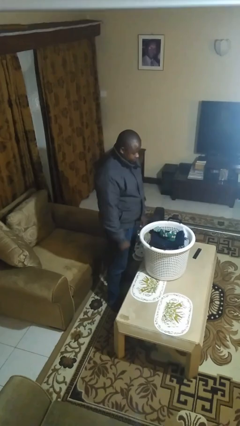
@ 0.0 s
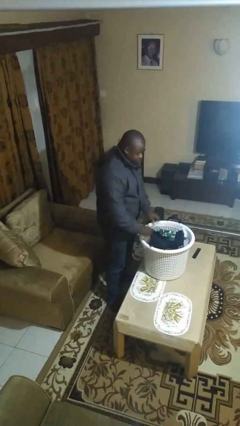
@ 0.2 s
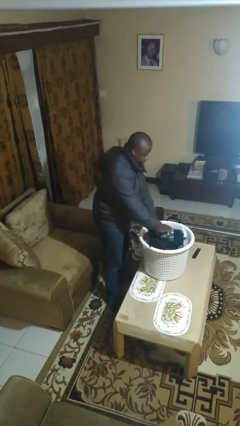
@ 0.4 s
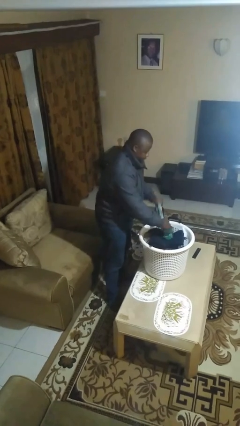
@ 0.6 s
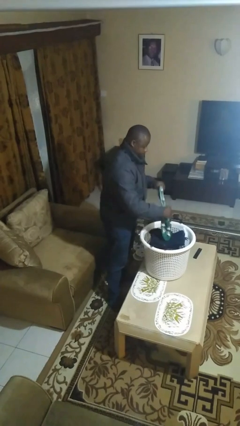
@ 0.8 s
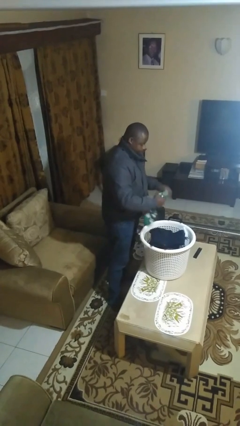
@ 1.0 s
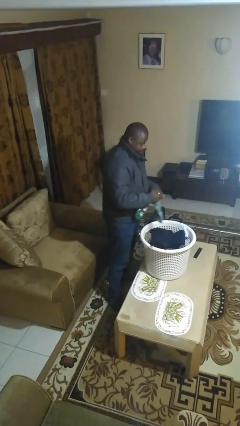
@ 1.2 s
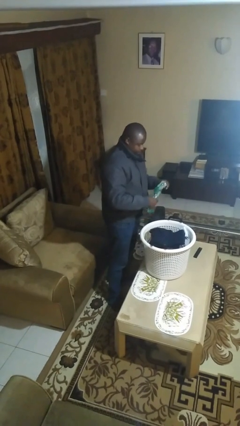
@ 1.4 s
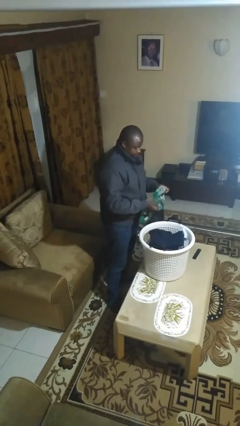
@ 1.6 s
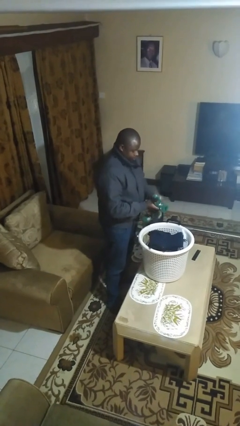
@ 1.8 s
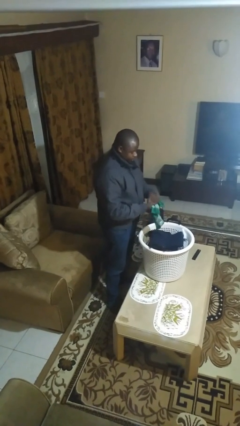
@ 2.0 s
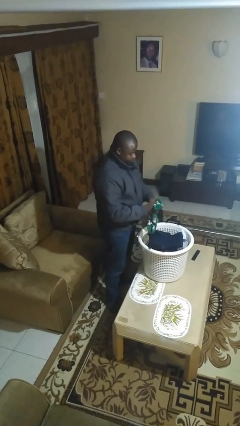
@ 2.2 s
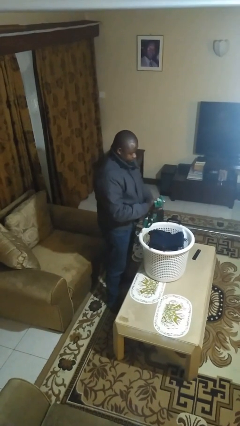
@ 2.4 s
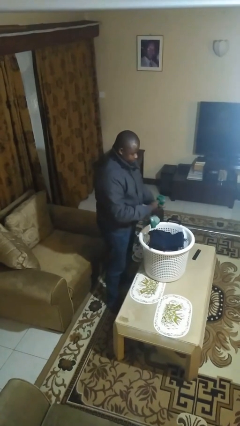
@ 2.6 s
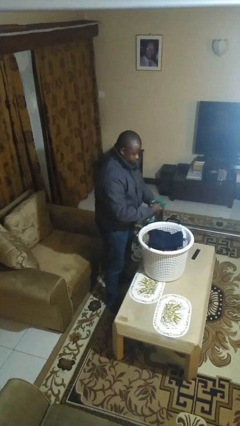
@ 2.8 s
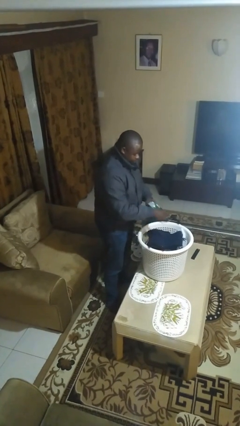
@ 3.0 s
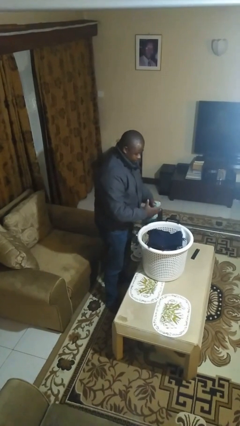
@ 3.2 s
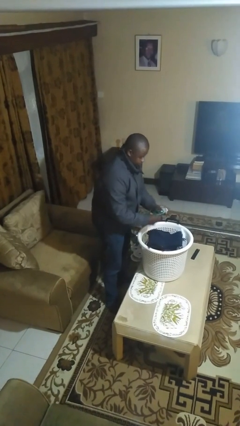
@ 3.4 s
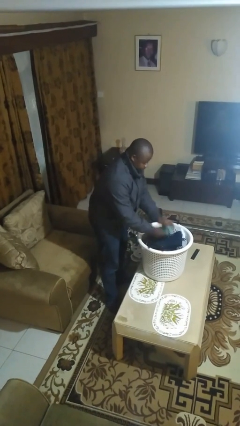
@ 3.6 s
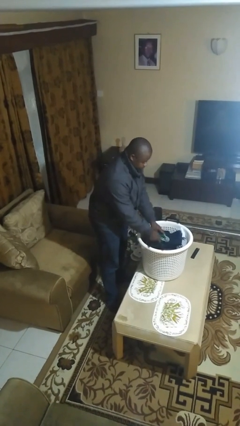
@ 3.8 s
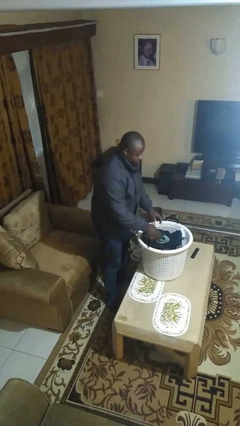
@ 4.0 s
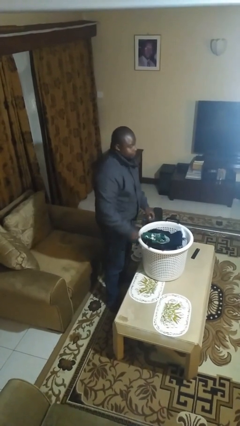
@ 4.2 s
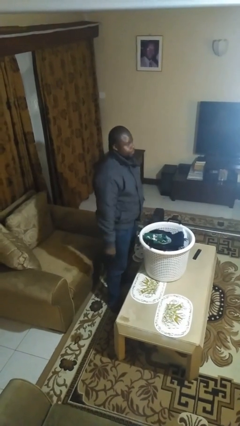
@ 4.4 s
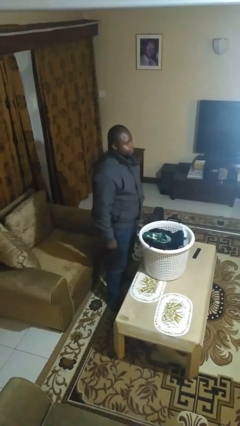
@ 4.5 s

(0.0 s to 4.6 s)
person folds socks

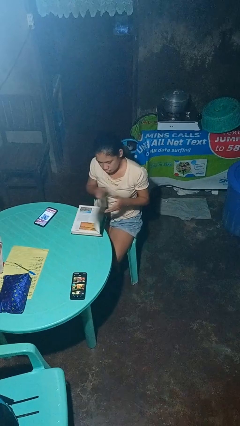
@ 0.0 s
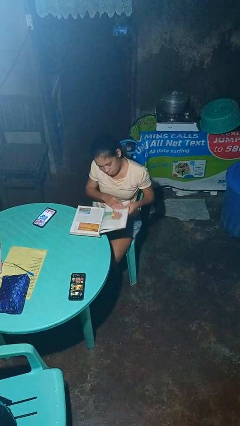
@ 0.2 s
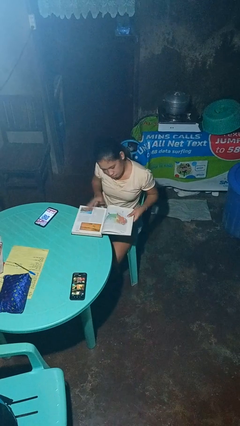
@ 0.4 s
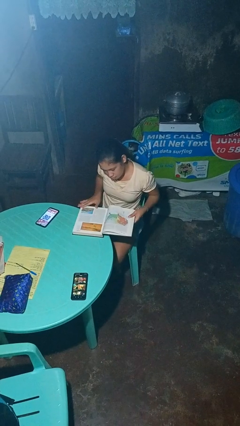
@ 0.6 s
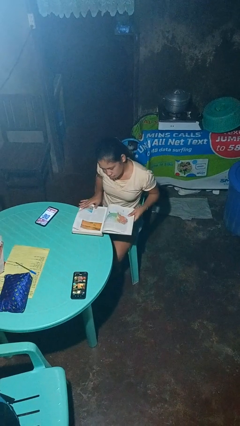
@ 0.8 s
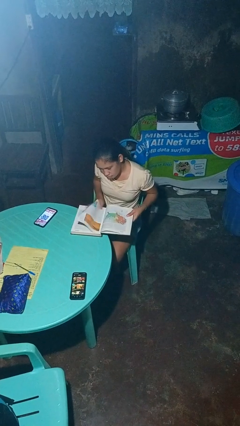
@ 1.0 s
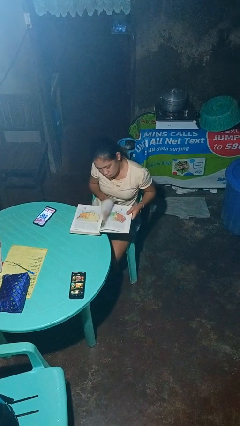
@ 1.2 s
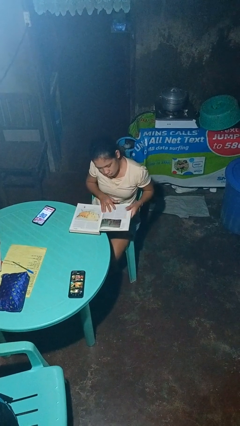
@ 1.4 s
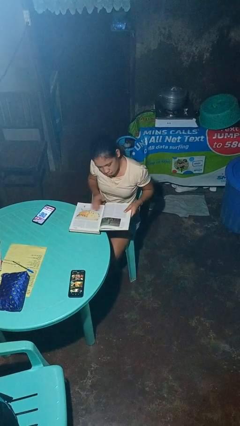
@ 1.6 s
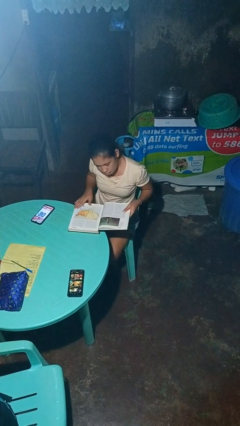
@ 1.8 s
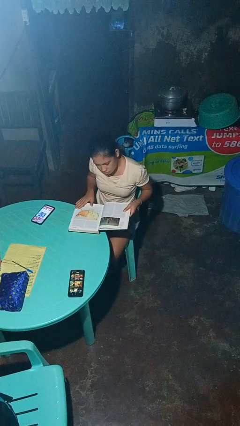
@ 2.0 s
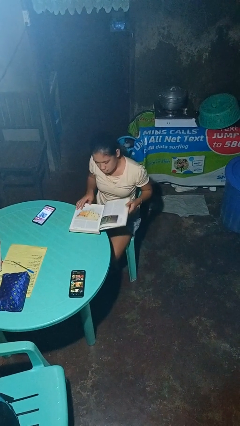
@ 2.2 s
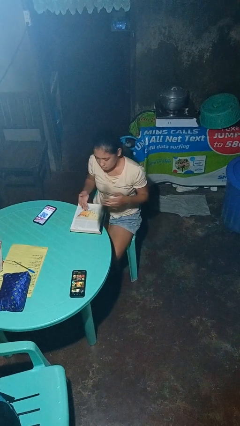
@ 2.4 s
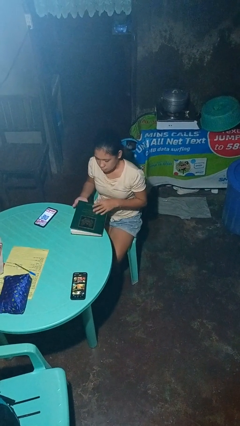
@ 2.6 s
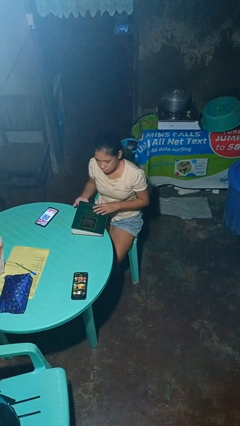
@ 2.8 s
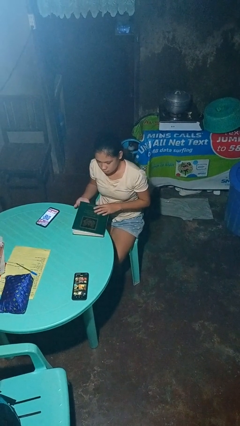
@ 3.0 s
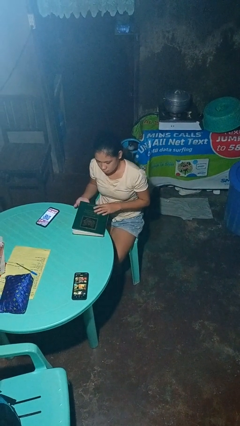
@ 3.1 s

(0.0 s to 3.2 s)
person reads book

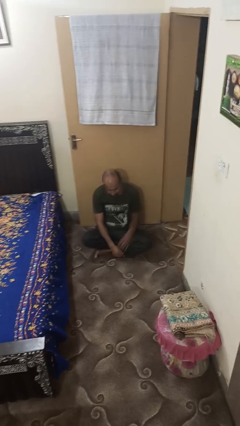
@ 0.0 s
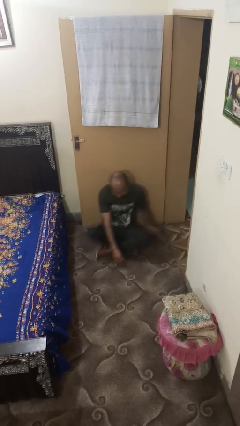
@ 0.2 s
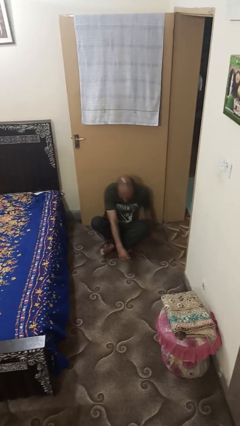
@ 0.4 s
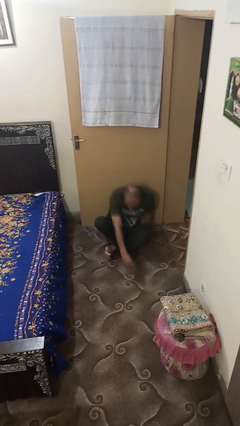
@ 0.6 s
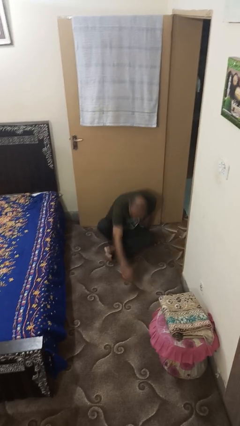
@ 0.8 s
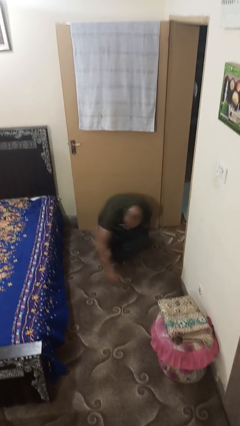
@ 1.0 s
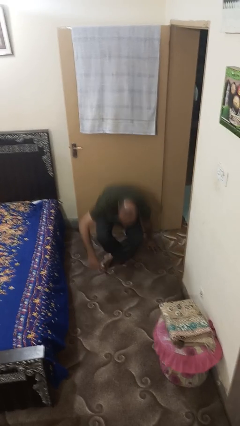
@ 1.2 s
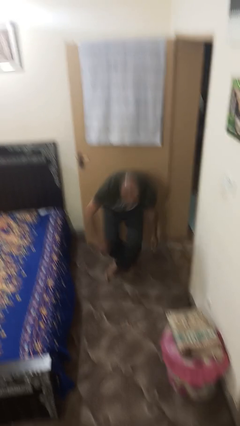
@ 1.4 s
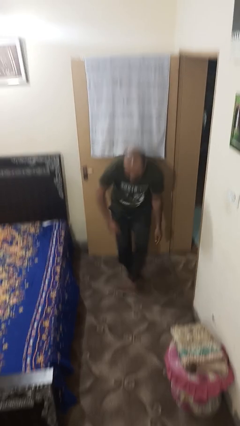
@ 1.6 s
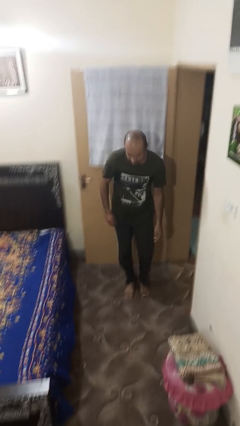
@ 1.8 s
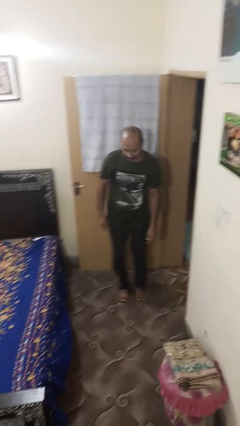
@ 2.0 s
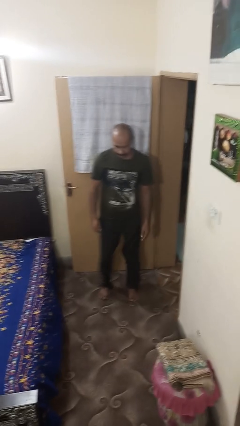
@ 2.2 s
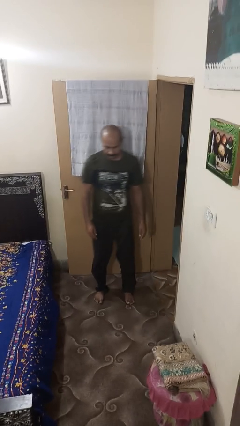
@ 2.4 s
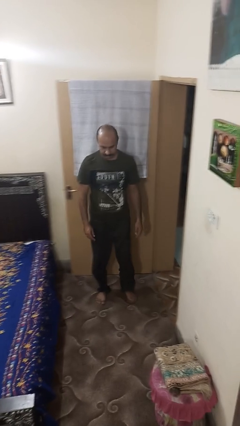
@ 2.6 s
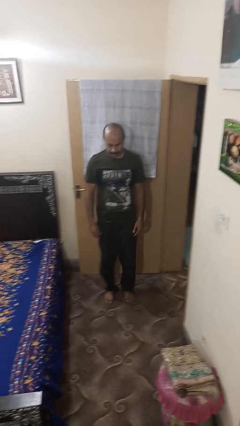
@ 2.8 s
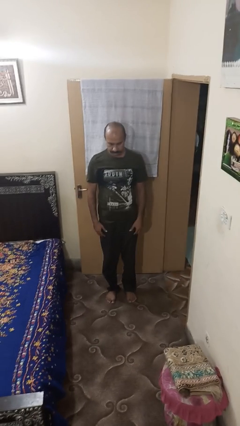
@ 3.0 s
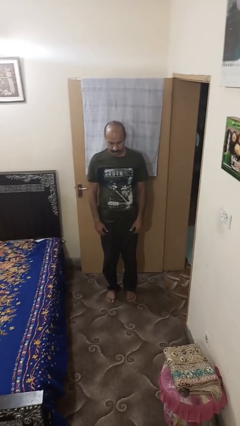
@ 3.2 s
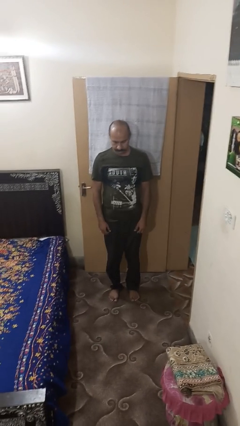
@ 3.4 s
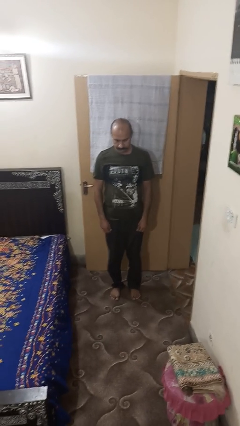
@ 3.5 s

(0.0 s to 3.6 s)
person stands up from floor

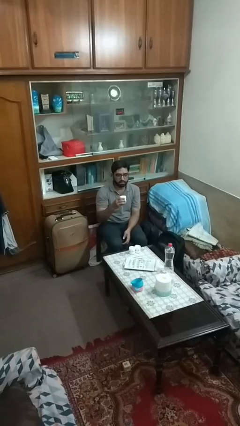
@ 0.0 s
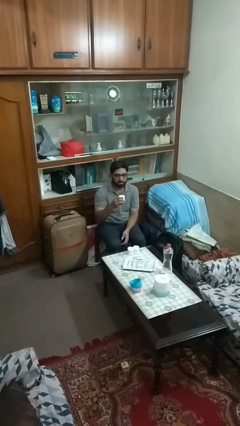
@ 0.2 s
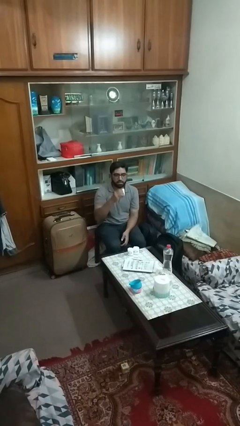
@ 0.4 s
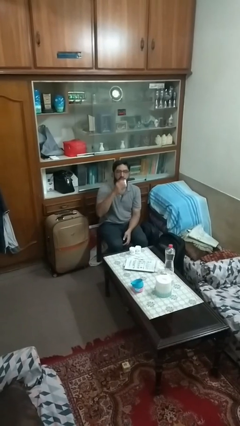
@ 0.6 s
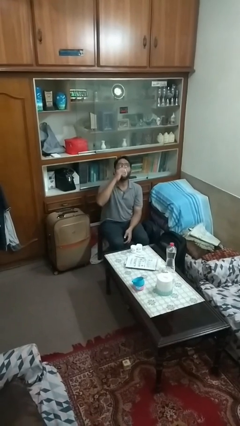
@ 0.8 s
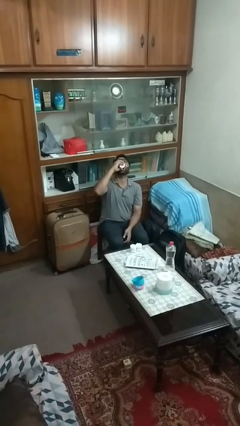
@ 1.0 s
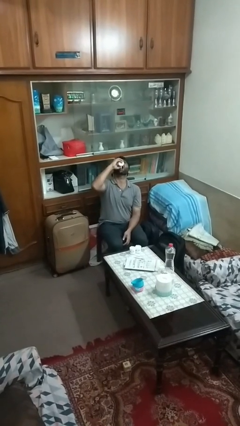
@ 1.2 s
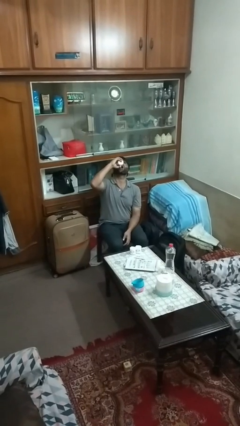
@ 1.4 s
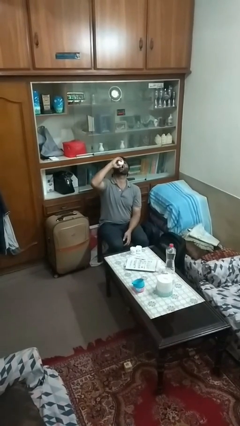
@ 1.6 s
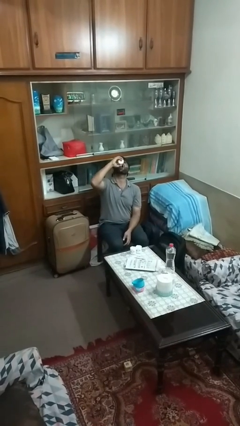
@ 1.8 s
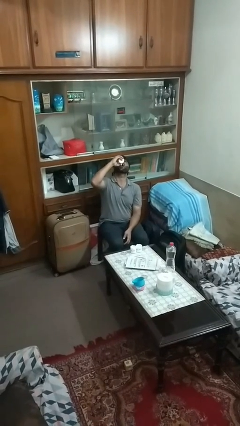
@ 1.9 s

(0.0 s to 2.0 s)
person drinks from shotglass

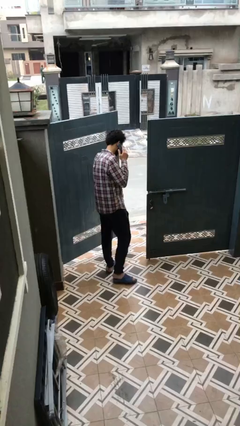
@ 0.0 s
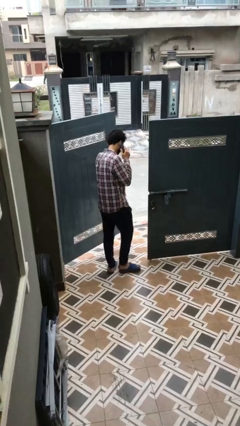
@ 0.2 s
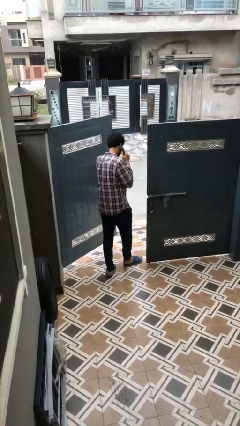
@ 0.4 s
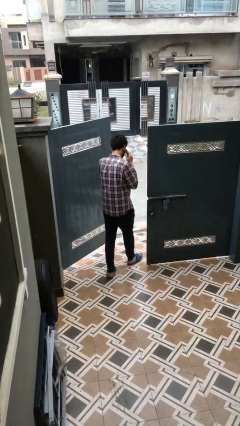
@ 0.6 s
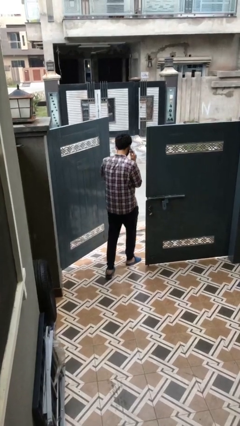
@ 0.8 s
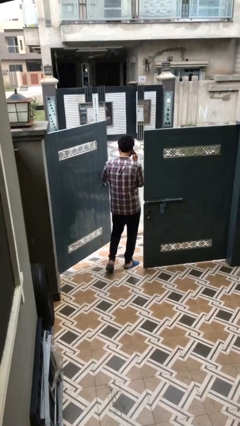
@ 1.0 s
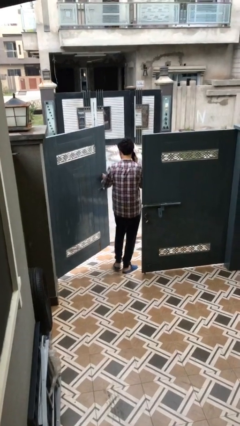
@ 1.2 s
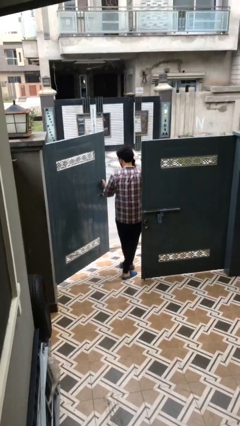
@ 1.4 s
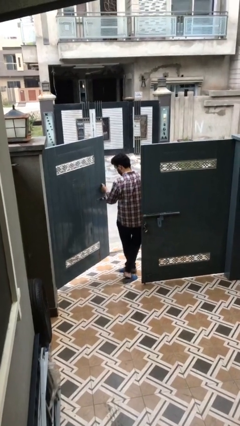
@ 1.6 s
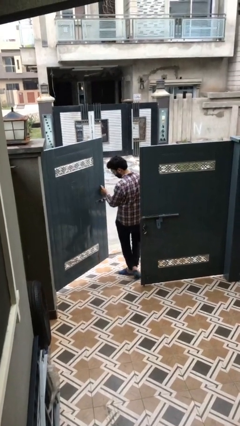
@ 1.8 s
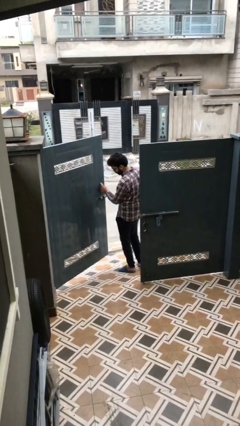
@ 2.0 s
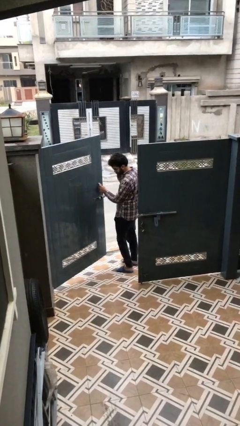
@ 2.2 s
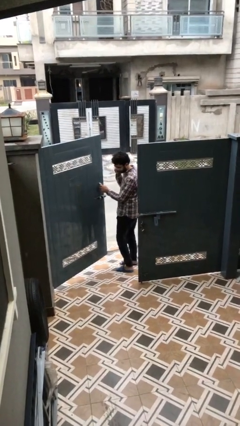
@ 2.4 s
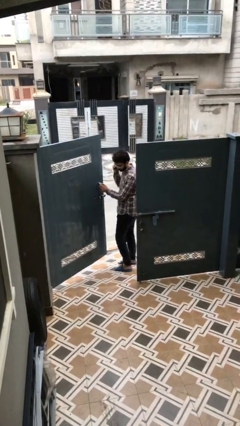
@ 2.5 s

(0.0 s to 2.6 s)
person exits scene through structure

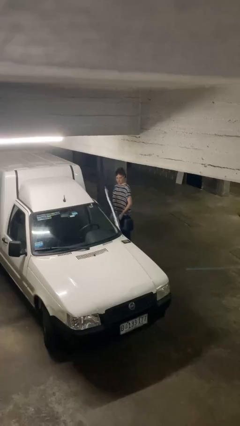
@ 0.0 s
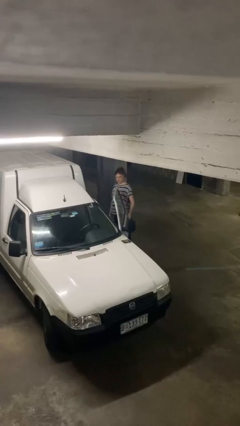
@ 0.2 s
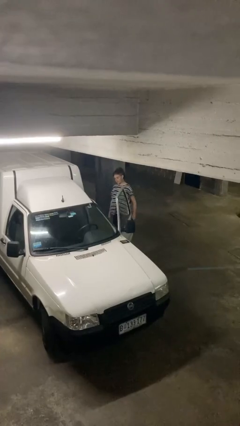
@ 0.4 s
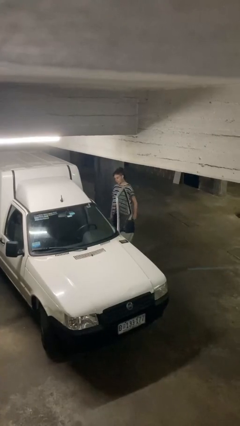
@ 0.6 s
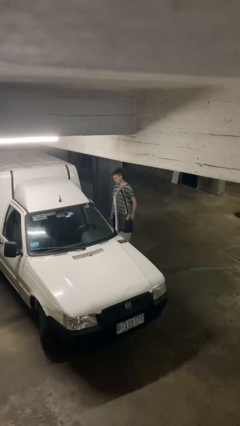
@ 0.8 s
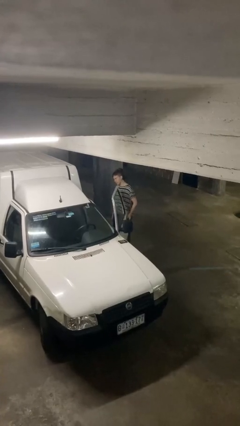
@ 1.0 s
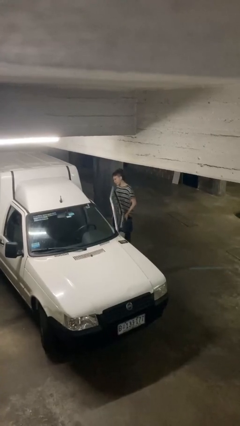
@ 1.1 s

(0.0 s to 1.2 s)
person opens car door

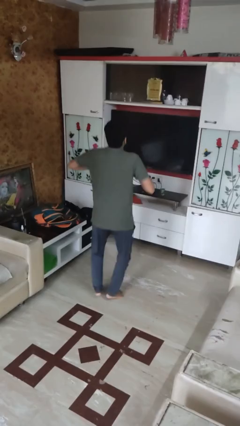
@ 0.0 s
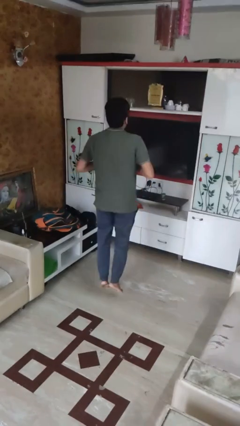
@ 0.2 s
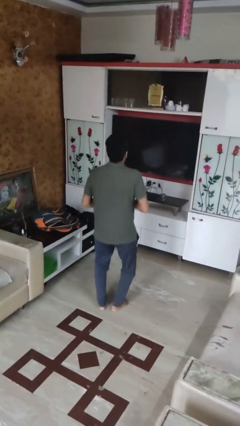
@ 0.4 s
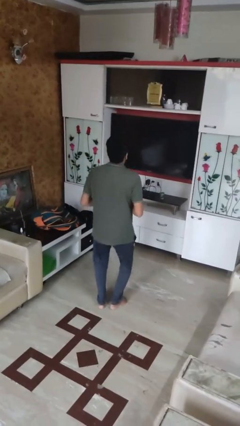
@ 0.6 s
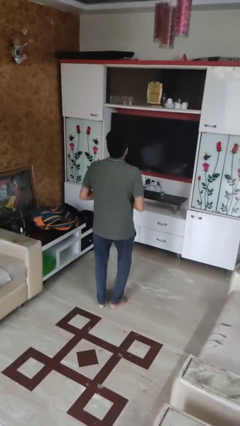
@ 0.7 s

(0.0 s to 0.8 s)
person jumps
